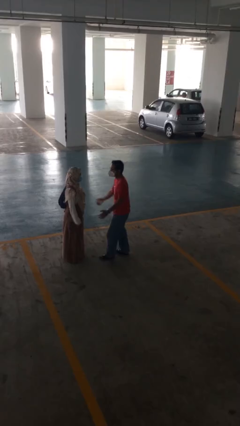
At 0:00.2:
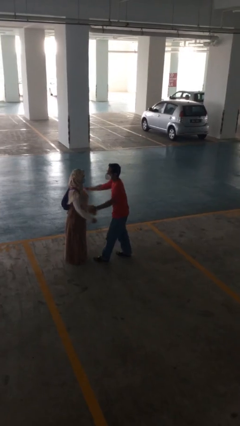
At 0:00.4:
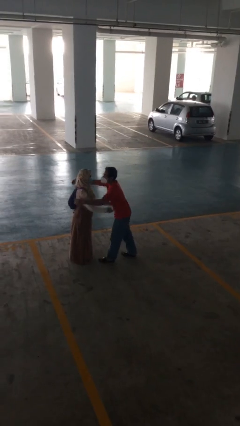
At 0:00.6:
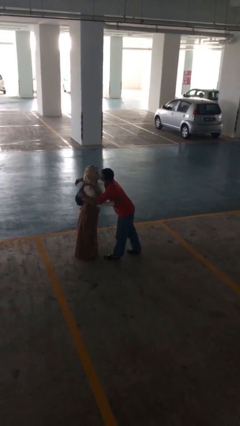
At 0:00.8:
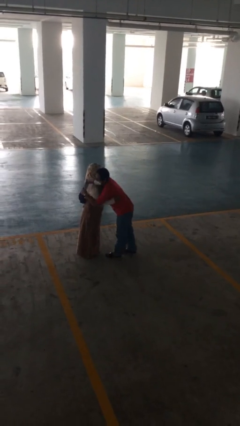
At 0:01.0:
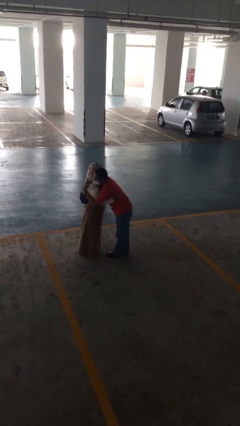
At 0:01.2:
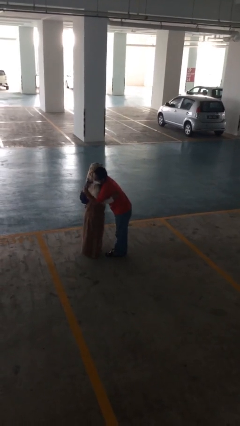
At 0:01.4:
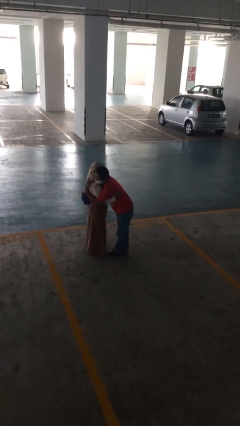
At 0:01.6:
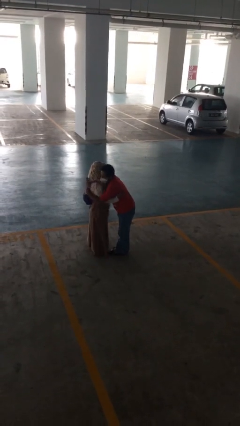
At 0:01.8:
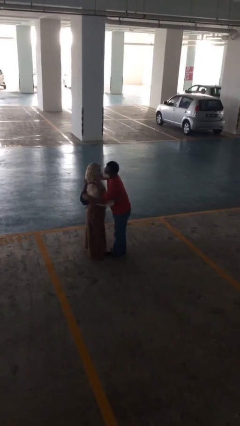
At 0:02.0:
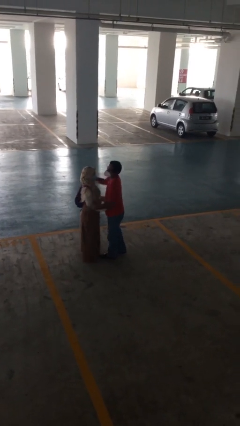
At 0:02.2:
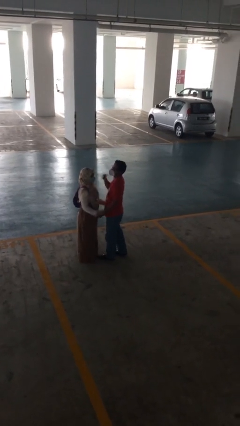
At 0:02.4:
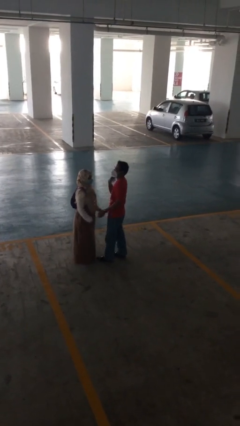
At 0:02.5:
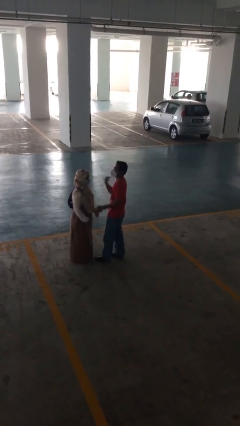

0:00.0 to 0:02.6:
person embraces person

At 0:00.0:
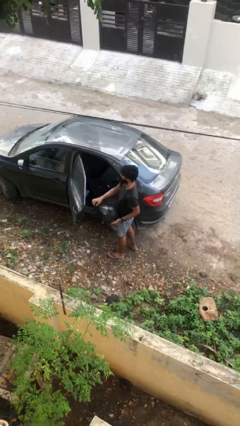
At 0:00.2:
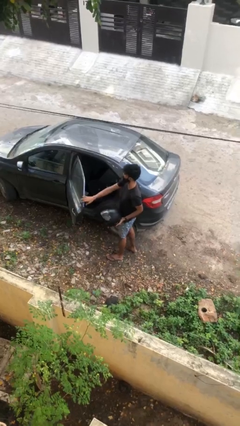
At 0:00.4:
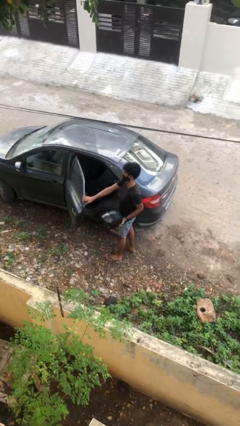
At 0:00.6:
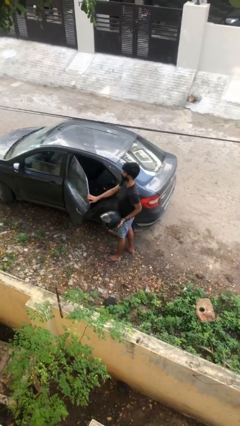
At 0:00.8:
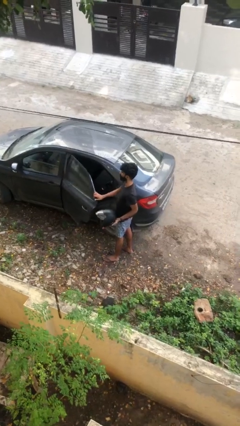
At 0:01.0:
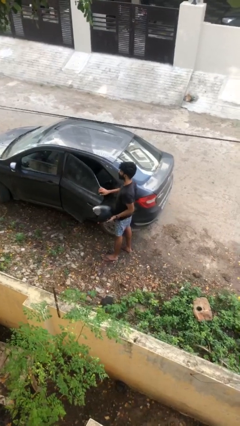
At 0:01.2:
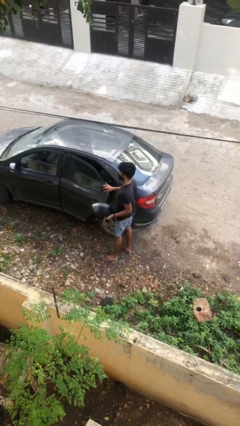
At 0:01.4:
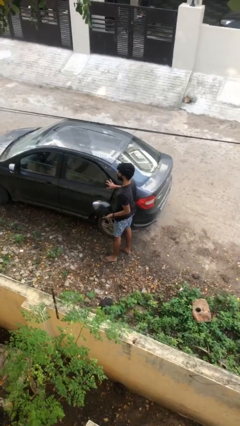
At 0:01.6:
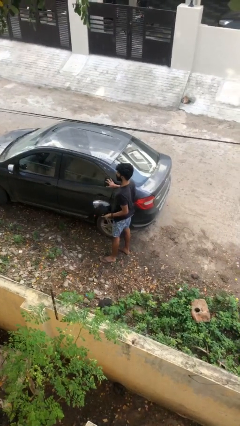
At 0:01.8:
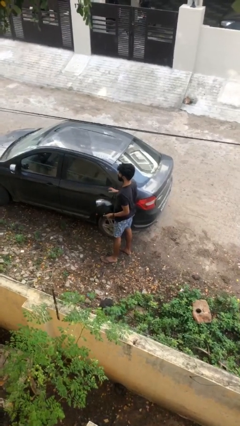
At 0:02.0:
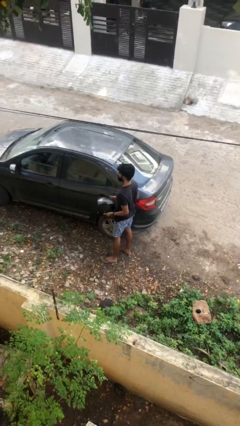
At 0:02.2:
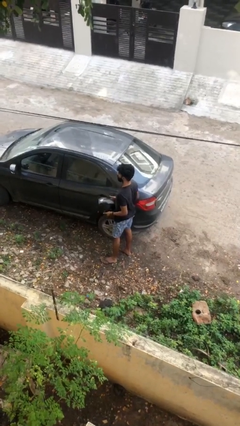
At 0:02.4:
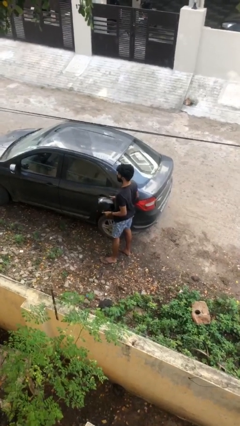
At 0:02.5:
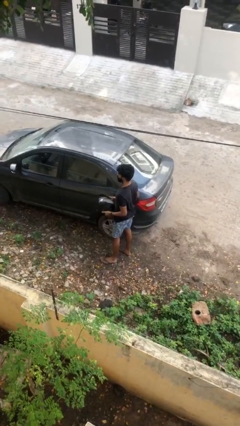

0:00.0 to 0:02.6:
person closes car door

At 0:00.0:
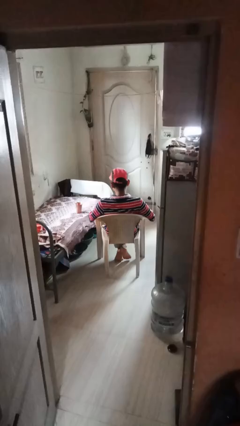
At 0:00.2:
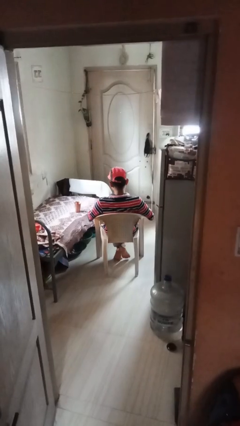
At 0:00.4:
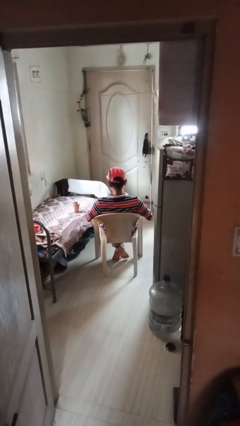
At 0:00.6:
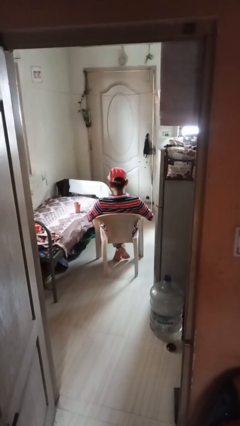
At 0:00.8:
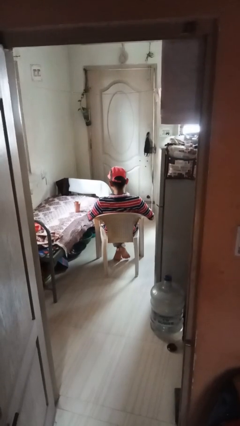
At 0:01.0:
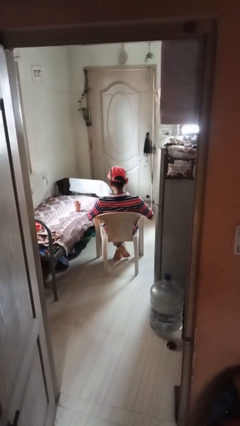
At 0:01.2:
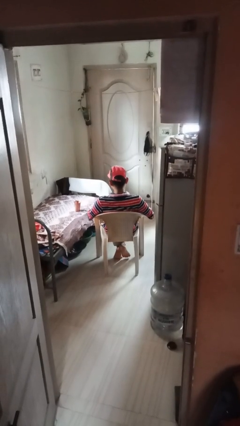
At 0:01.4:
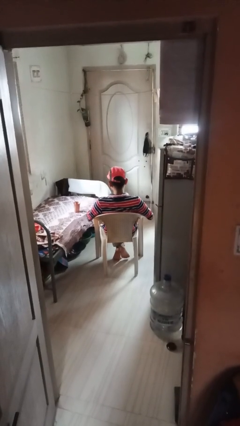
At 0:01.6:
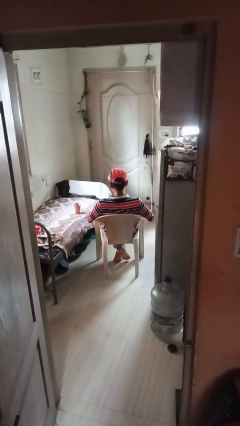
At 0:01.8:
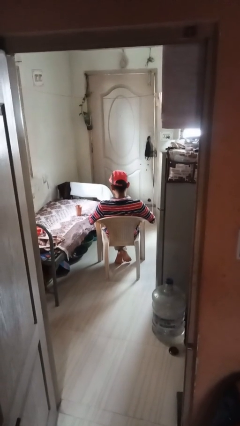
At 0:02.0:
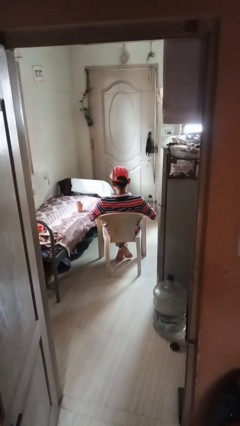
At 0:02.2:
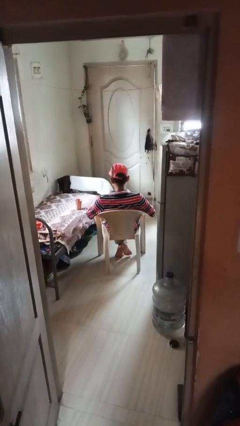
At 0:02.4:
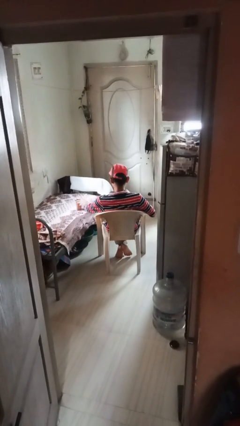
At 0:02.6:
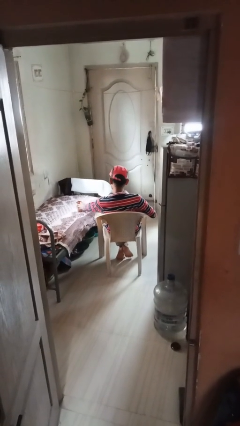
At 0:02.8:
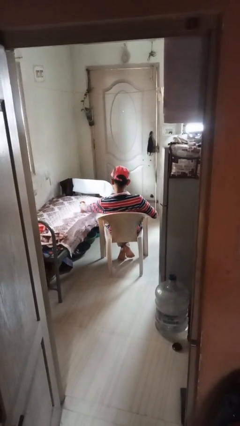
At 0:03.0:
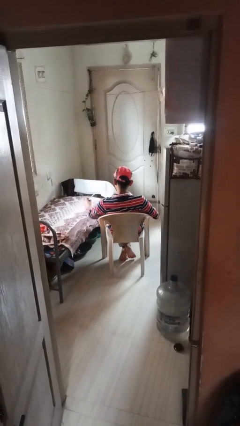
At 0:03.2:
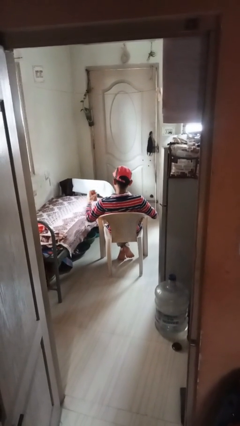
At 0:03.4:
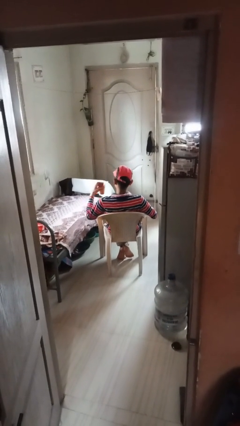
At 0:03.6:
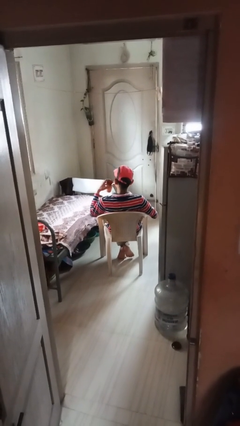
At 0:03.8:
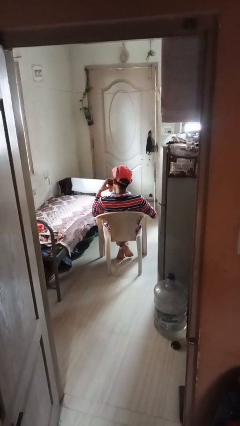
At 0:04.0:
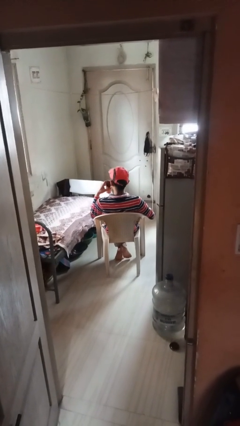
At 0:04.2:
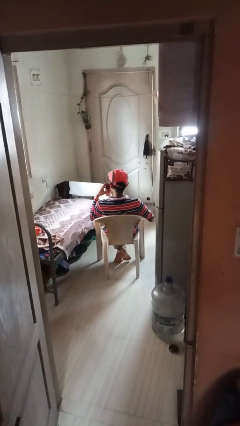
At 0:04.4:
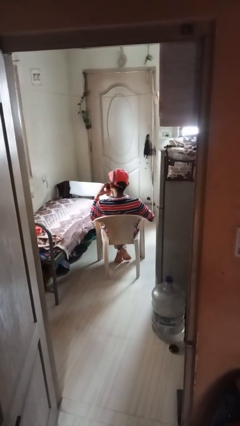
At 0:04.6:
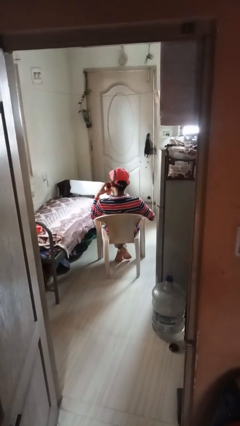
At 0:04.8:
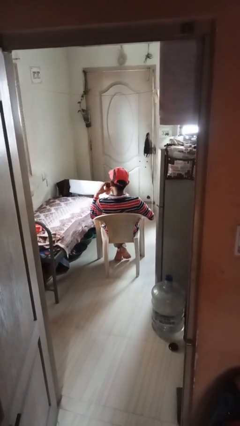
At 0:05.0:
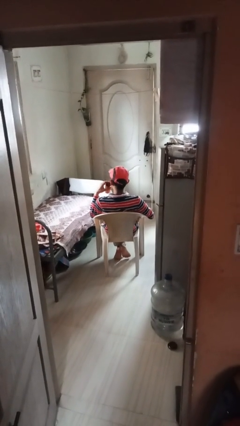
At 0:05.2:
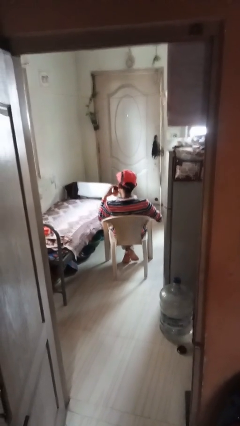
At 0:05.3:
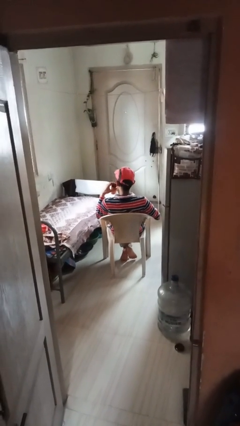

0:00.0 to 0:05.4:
person drinks from straw

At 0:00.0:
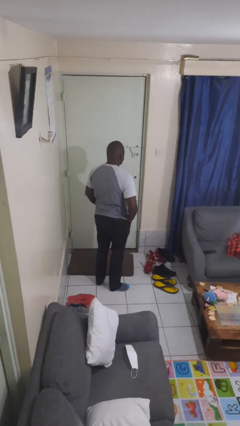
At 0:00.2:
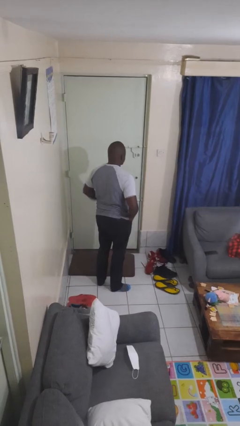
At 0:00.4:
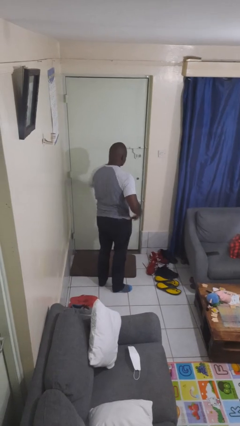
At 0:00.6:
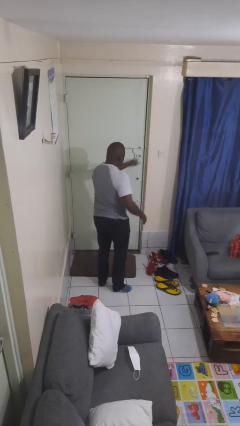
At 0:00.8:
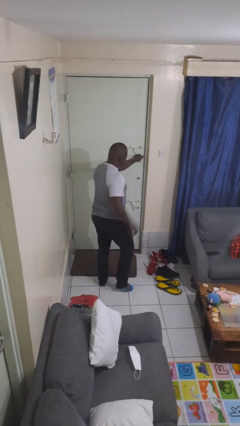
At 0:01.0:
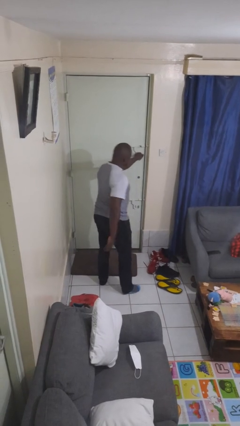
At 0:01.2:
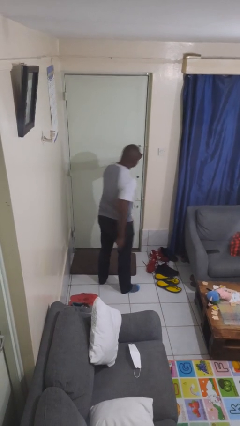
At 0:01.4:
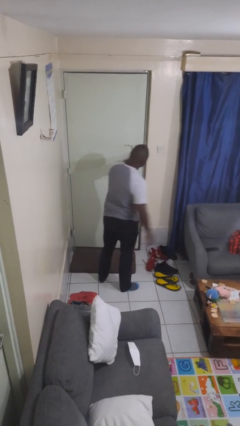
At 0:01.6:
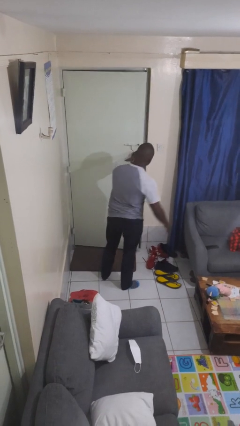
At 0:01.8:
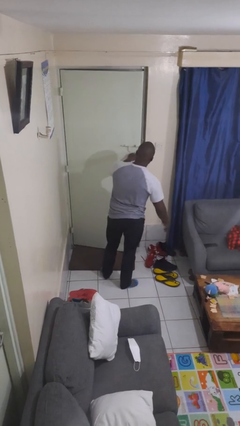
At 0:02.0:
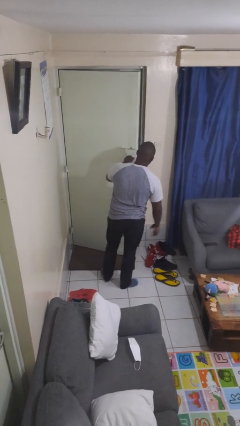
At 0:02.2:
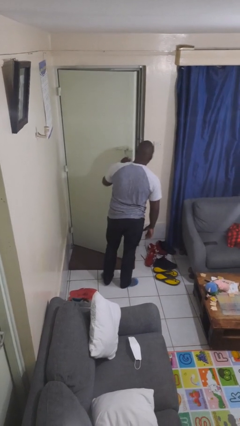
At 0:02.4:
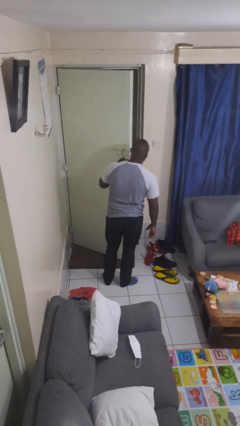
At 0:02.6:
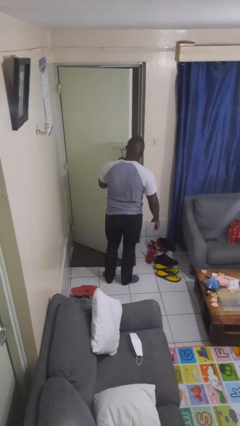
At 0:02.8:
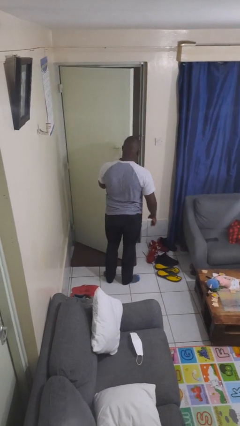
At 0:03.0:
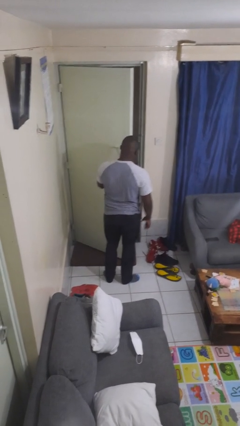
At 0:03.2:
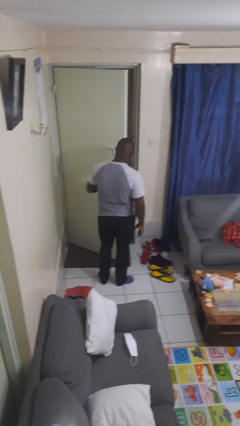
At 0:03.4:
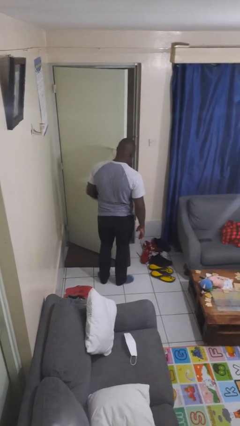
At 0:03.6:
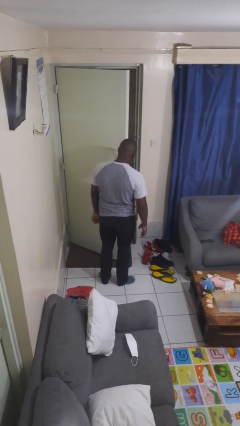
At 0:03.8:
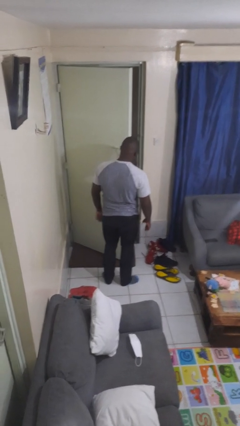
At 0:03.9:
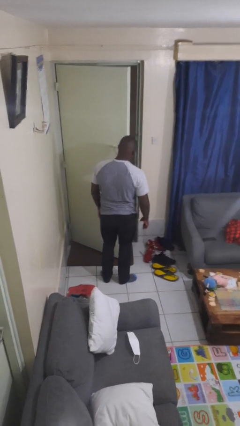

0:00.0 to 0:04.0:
person opens facility door

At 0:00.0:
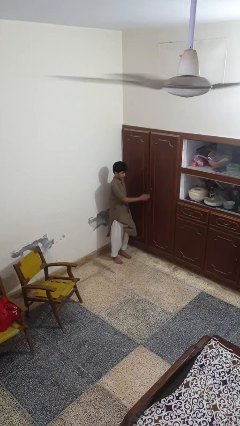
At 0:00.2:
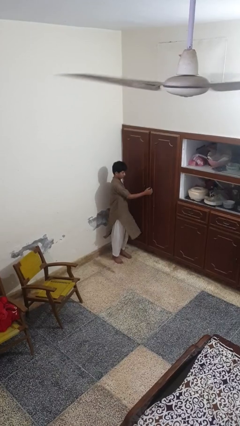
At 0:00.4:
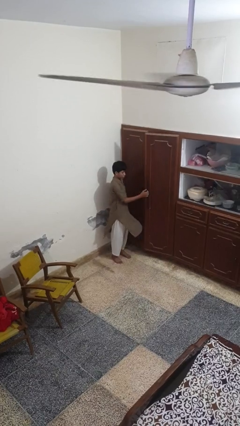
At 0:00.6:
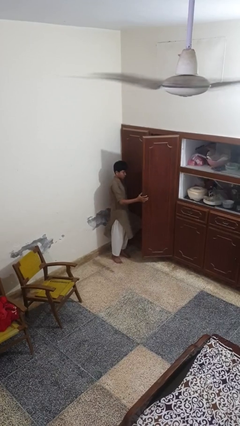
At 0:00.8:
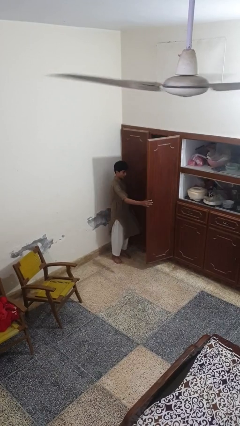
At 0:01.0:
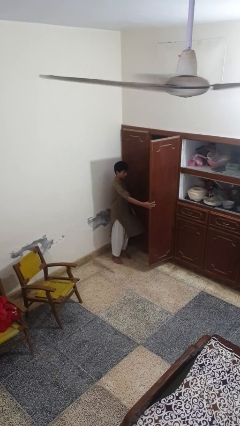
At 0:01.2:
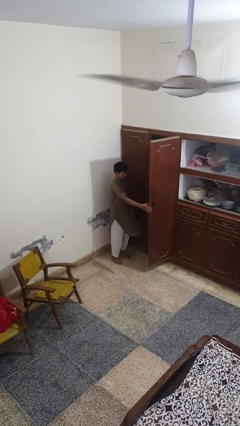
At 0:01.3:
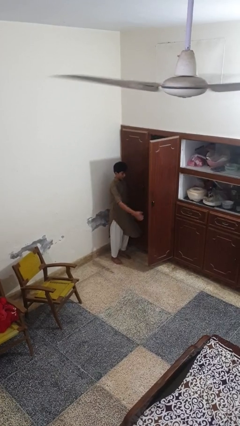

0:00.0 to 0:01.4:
person opens closet door

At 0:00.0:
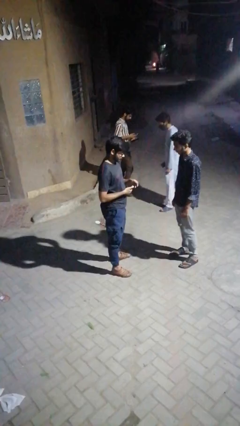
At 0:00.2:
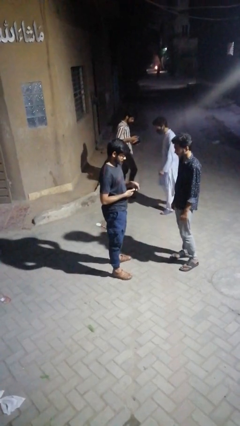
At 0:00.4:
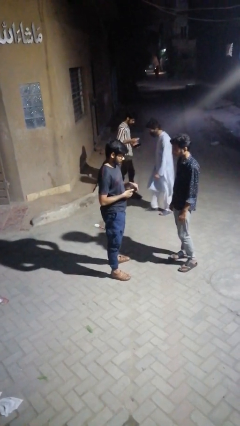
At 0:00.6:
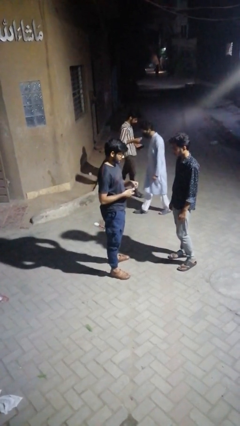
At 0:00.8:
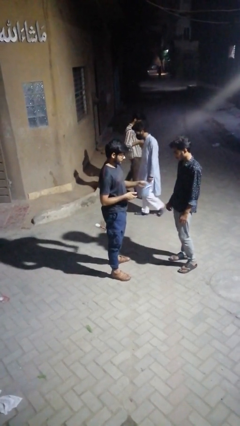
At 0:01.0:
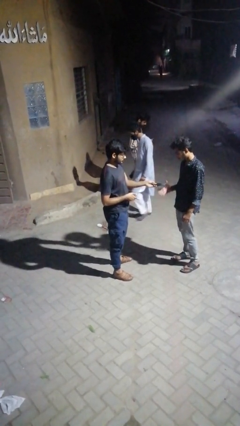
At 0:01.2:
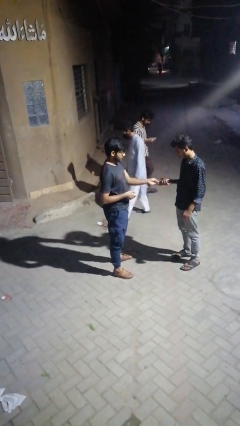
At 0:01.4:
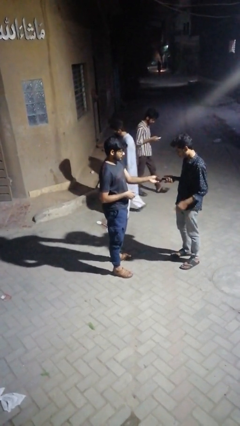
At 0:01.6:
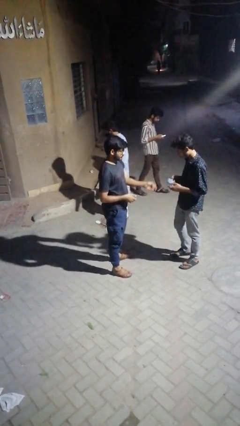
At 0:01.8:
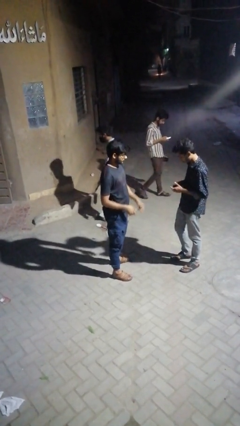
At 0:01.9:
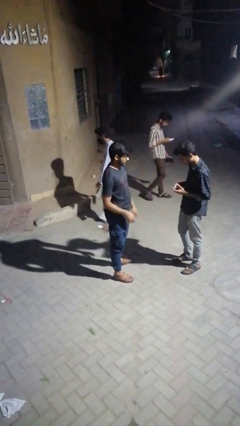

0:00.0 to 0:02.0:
person transfers object to person
